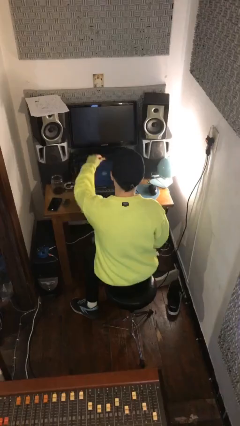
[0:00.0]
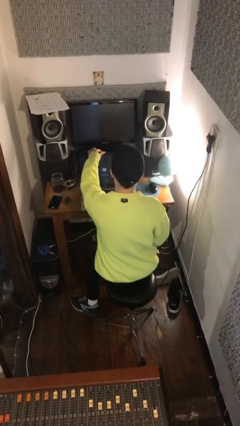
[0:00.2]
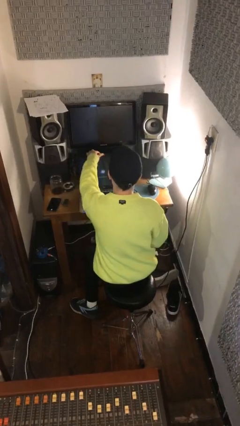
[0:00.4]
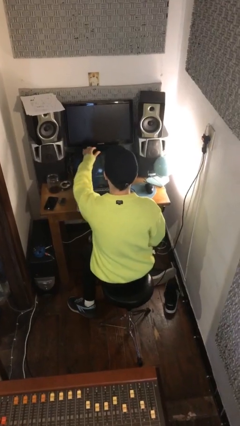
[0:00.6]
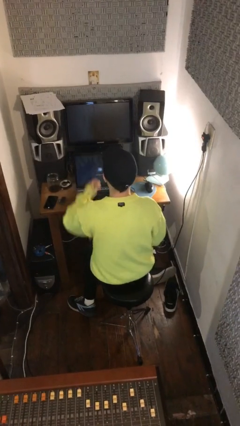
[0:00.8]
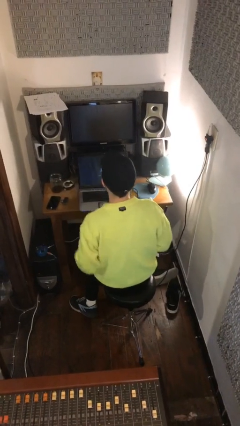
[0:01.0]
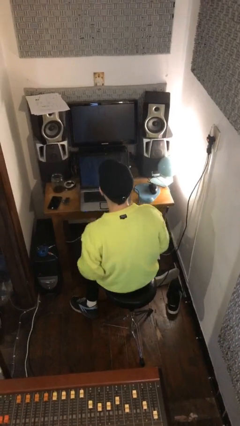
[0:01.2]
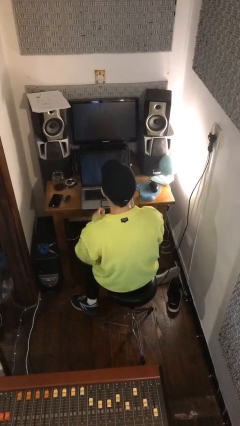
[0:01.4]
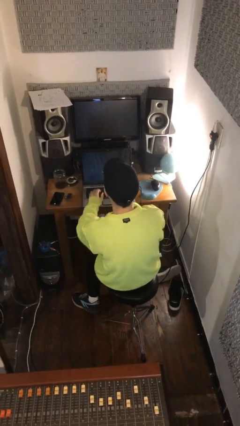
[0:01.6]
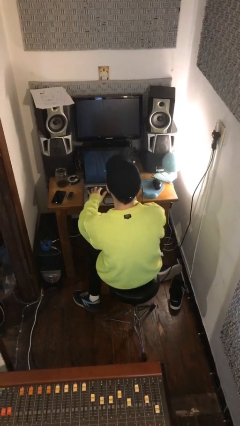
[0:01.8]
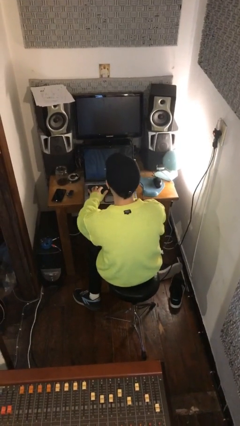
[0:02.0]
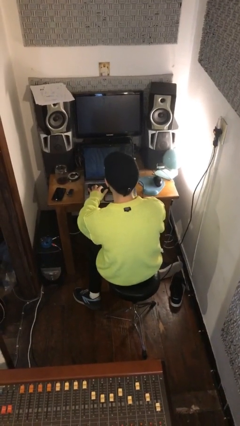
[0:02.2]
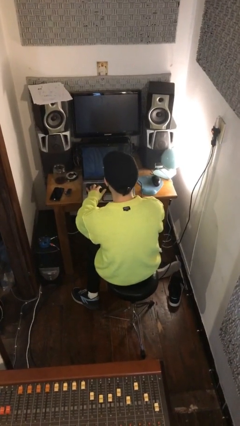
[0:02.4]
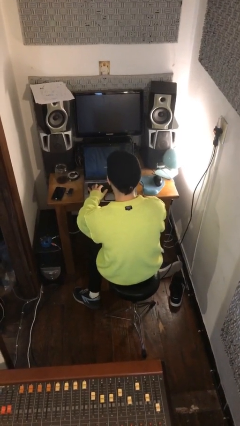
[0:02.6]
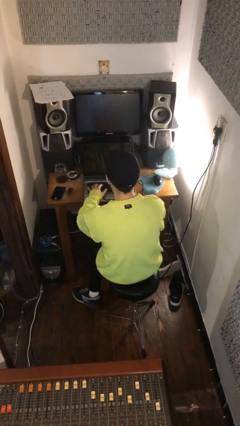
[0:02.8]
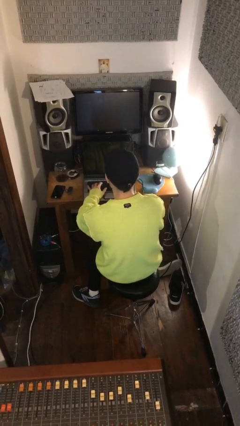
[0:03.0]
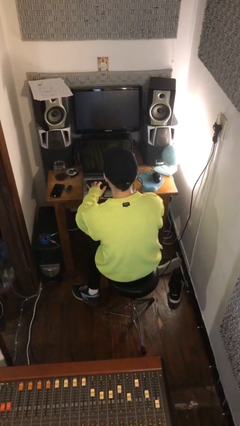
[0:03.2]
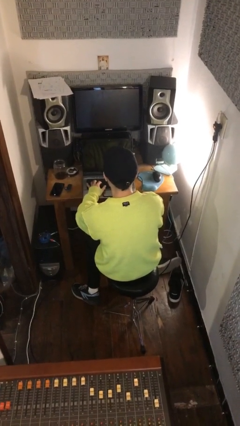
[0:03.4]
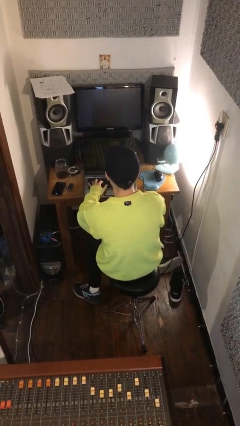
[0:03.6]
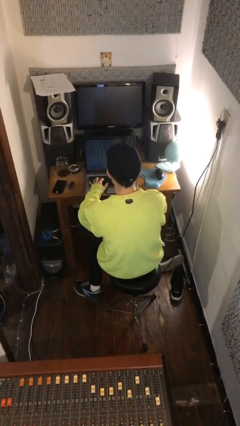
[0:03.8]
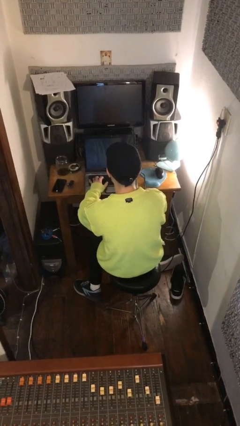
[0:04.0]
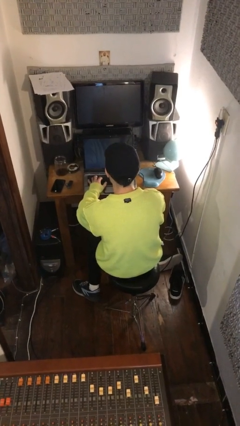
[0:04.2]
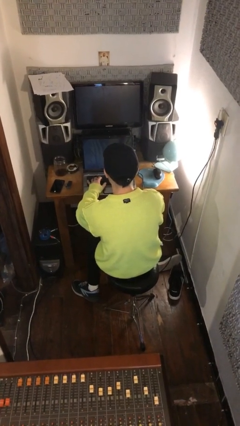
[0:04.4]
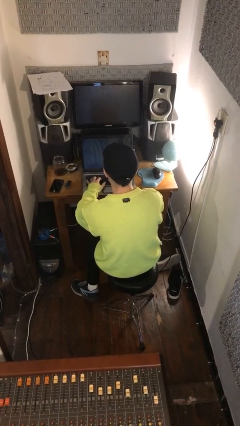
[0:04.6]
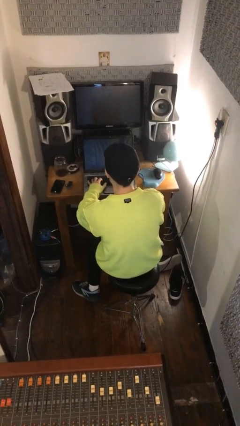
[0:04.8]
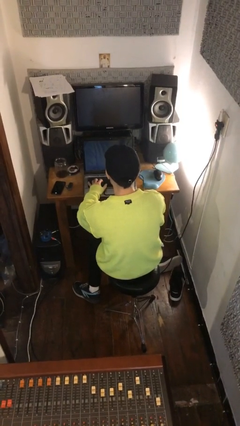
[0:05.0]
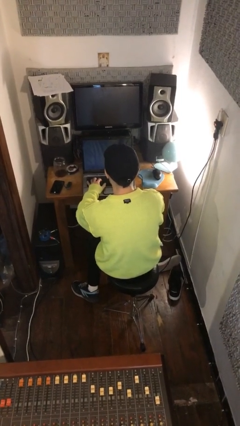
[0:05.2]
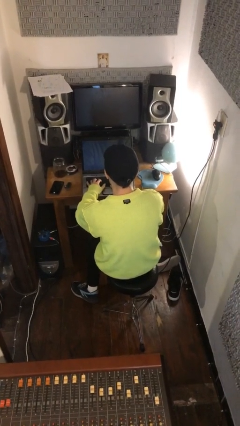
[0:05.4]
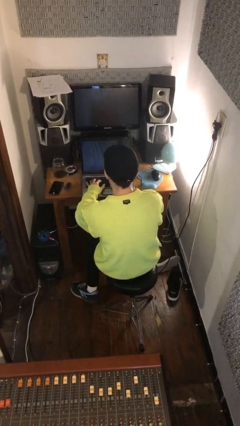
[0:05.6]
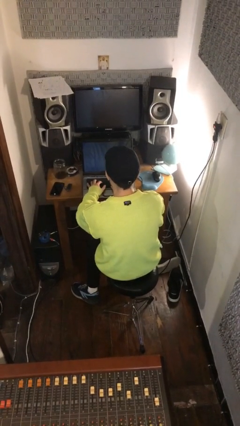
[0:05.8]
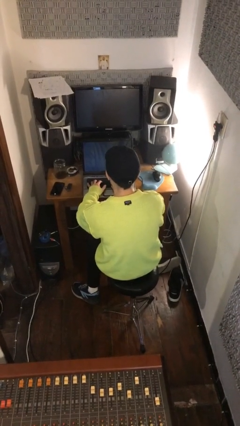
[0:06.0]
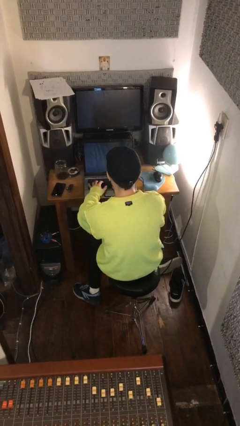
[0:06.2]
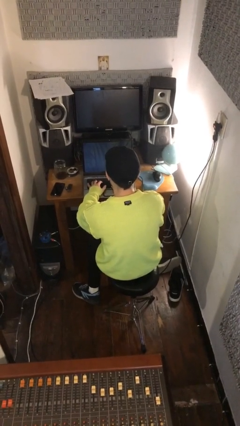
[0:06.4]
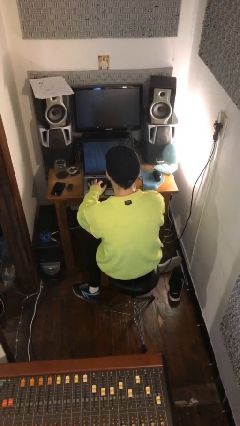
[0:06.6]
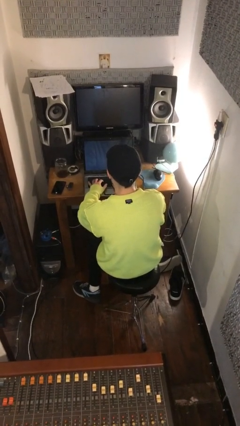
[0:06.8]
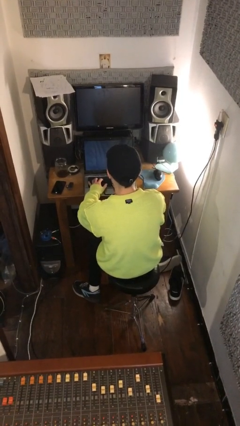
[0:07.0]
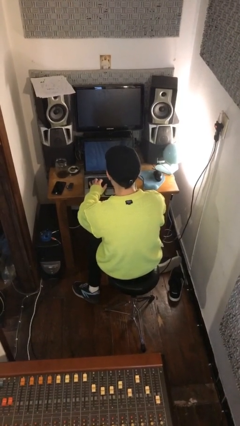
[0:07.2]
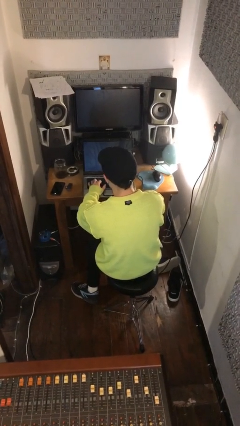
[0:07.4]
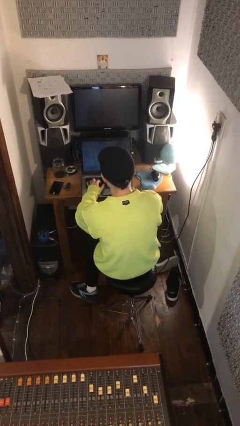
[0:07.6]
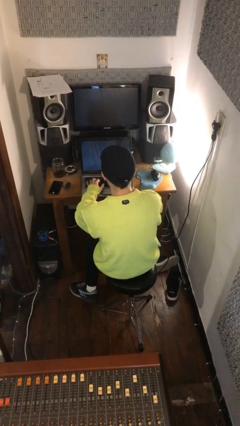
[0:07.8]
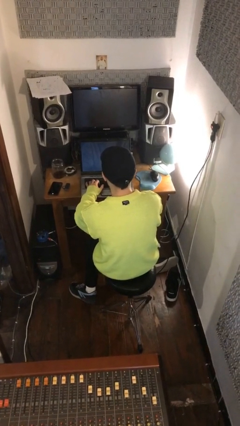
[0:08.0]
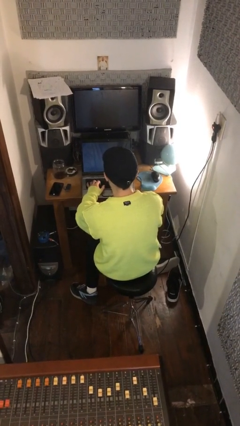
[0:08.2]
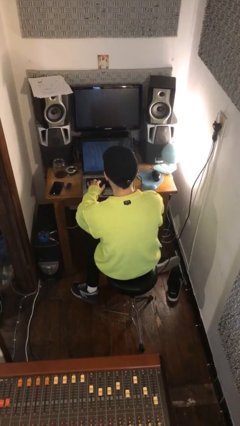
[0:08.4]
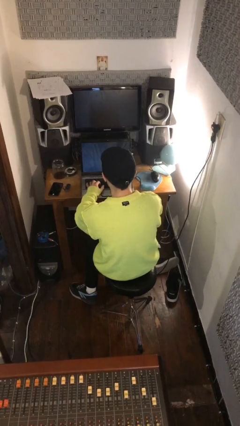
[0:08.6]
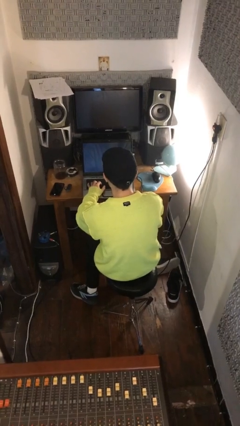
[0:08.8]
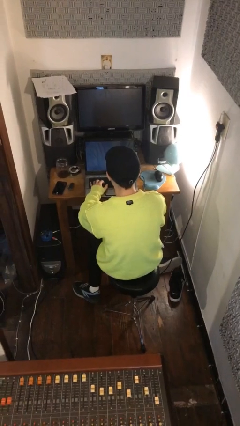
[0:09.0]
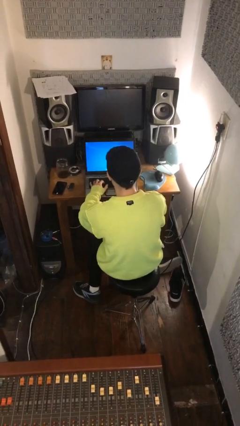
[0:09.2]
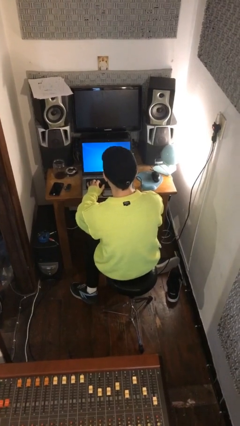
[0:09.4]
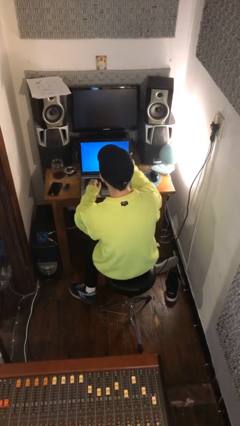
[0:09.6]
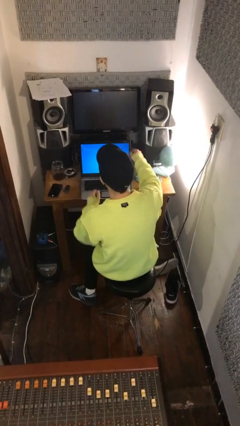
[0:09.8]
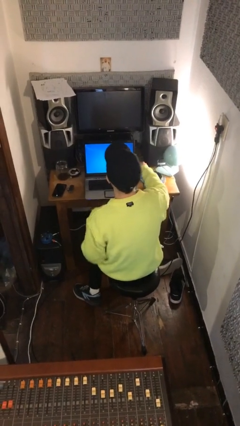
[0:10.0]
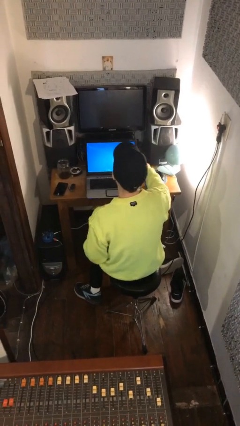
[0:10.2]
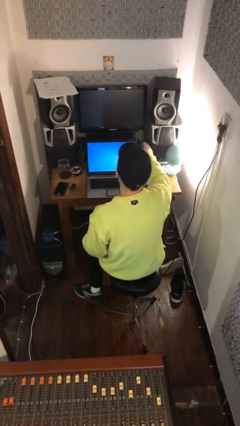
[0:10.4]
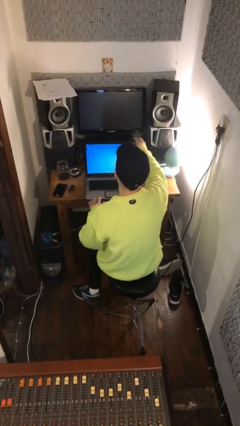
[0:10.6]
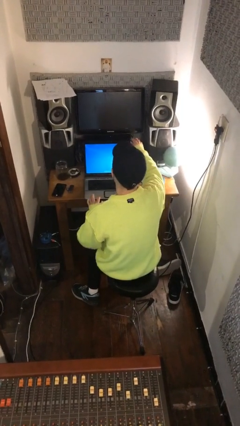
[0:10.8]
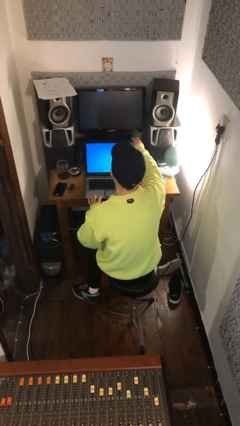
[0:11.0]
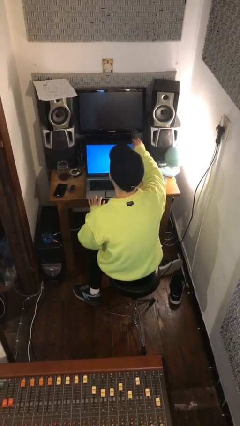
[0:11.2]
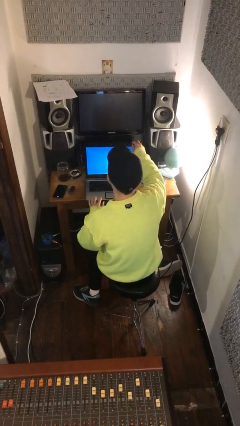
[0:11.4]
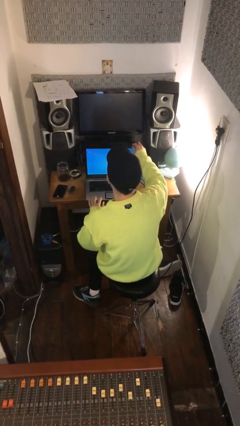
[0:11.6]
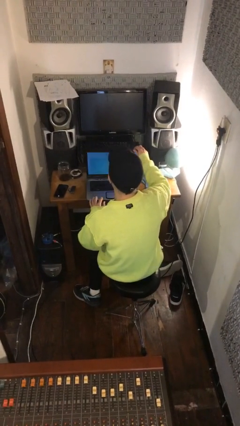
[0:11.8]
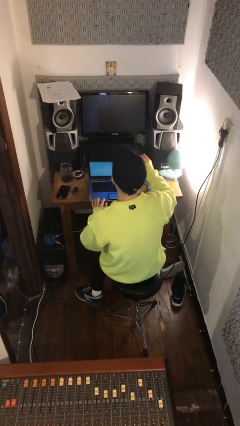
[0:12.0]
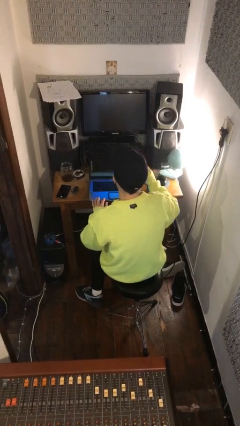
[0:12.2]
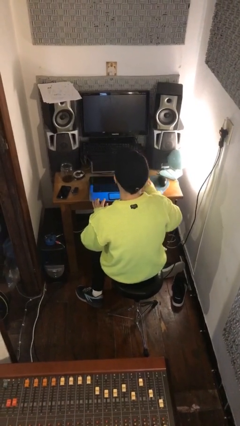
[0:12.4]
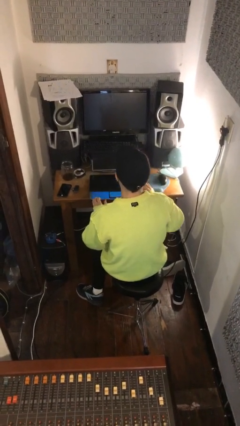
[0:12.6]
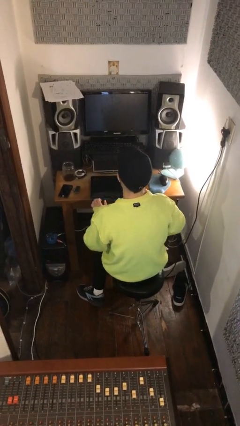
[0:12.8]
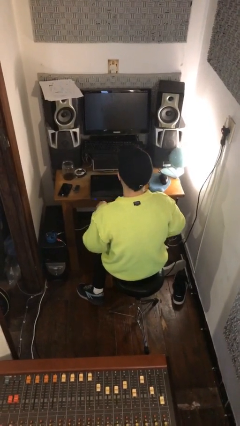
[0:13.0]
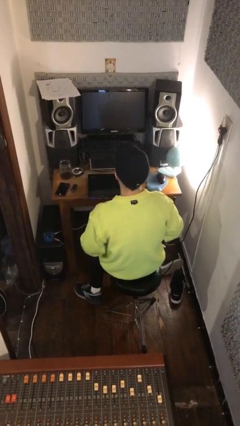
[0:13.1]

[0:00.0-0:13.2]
person interacts with laptop

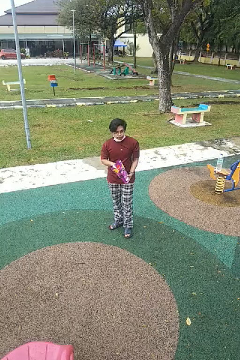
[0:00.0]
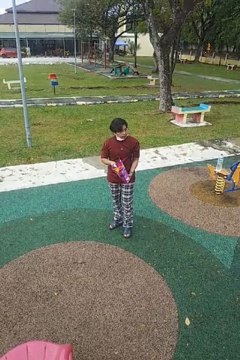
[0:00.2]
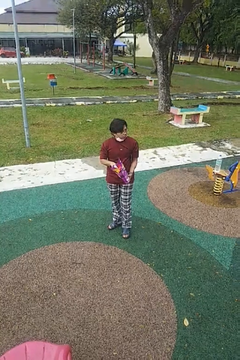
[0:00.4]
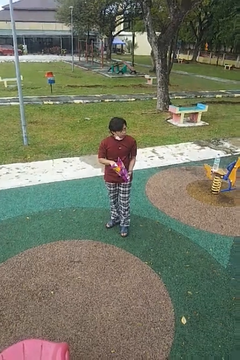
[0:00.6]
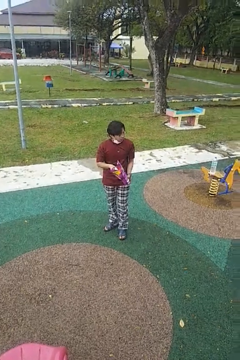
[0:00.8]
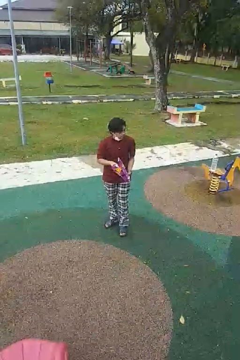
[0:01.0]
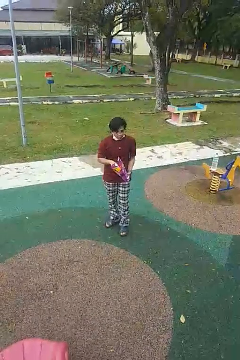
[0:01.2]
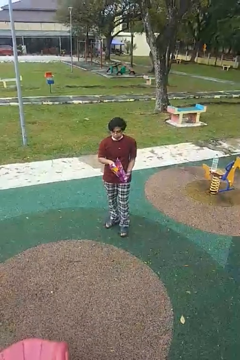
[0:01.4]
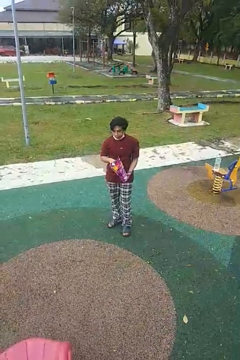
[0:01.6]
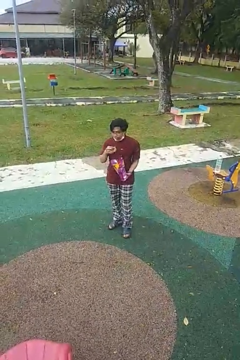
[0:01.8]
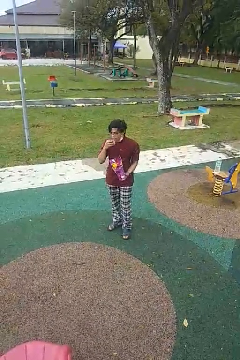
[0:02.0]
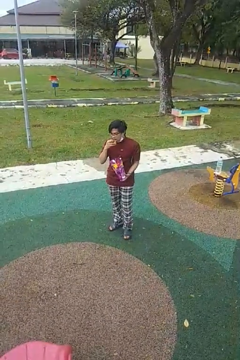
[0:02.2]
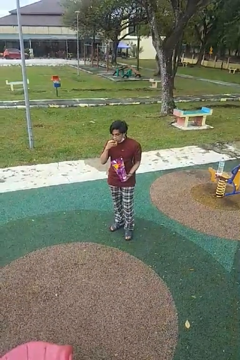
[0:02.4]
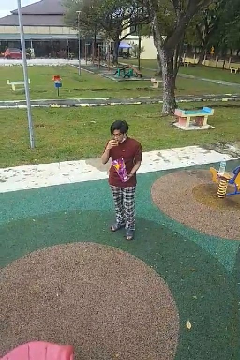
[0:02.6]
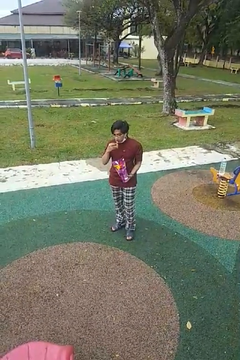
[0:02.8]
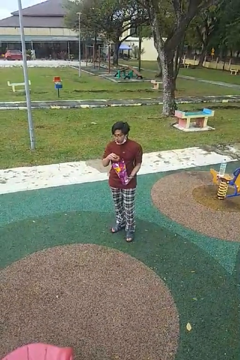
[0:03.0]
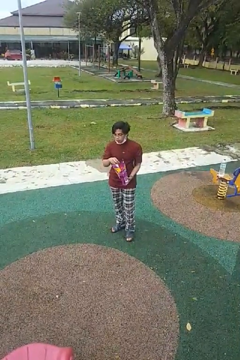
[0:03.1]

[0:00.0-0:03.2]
person eats snack from bag

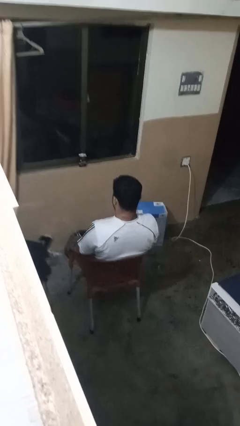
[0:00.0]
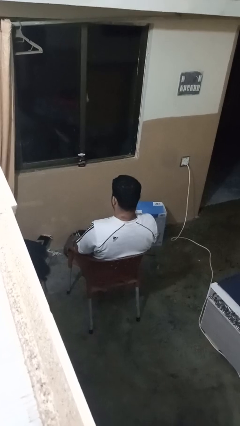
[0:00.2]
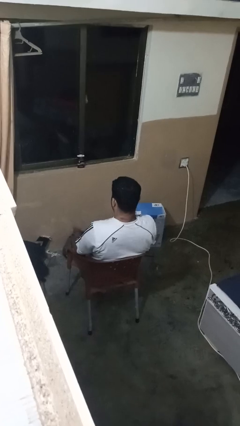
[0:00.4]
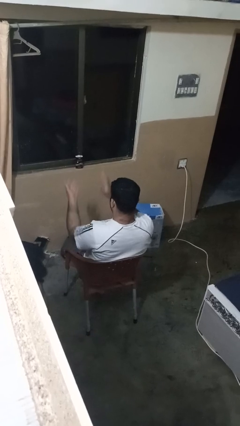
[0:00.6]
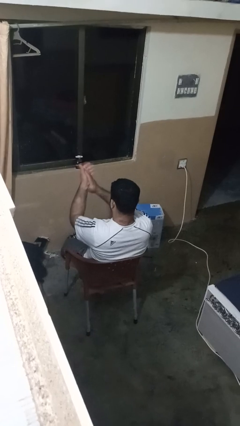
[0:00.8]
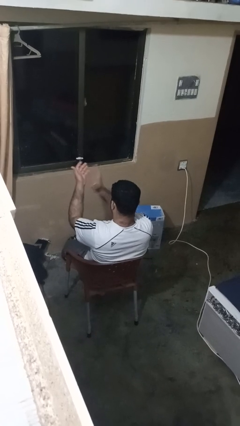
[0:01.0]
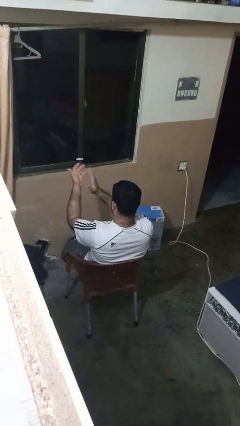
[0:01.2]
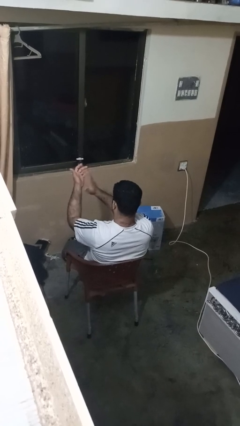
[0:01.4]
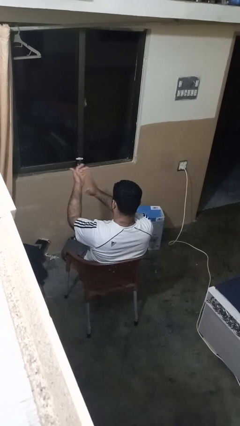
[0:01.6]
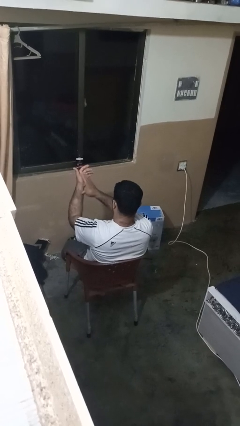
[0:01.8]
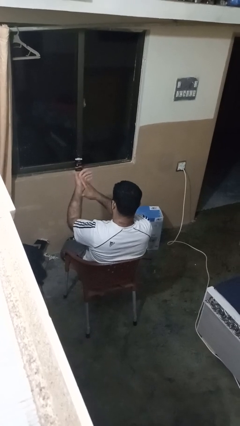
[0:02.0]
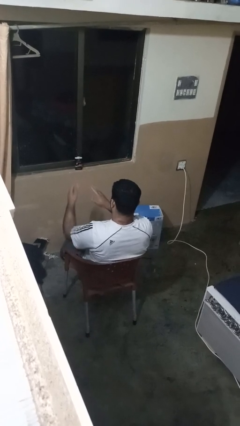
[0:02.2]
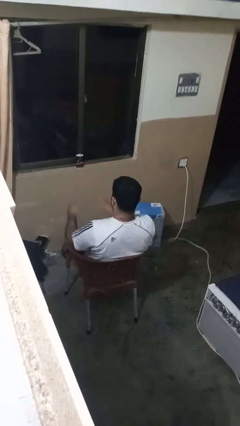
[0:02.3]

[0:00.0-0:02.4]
person claps hands
